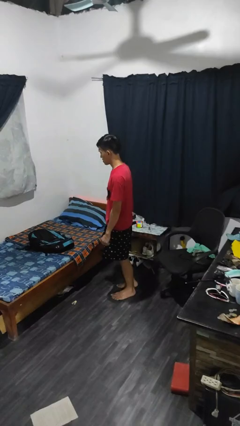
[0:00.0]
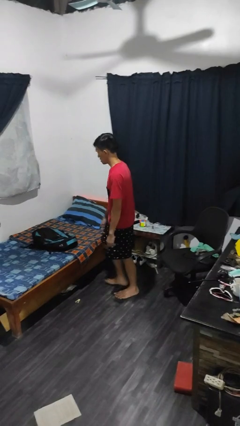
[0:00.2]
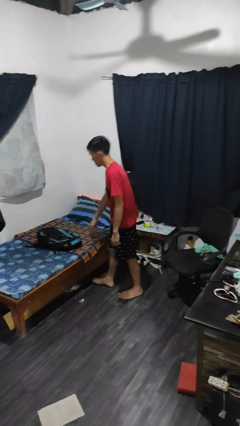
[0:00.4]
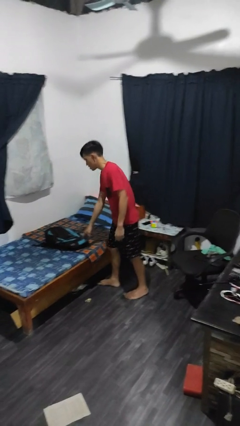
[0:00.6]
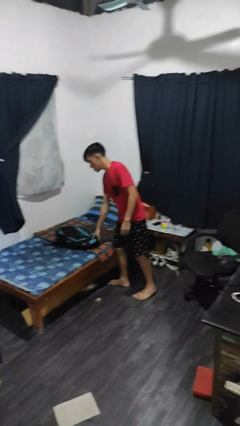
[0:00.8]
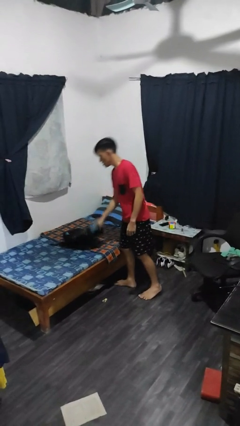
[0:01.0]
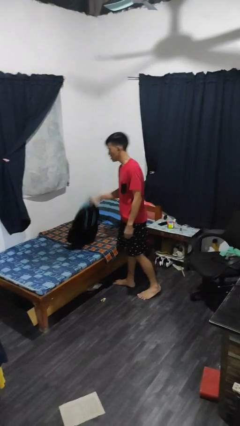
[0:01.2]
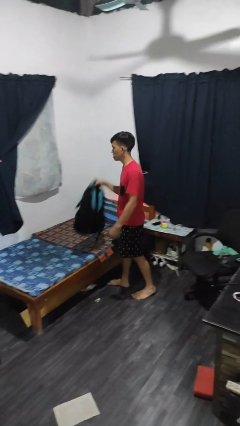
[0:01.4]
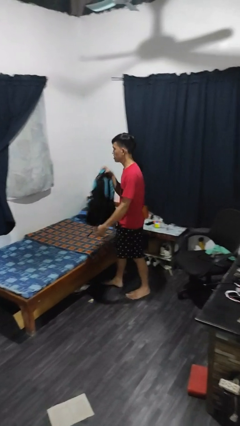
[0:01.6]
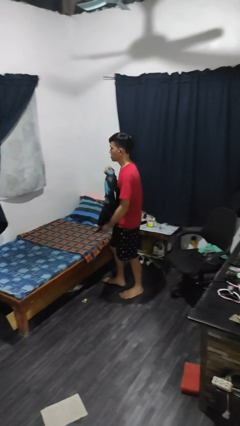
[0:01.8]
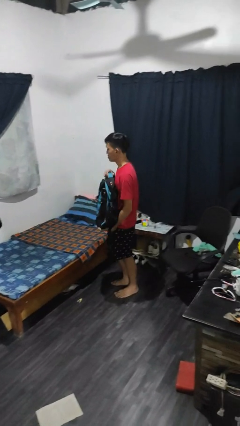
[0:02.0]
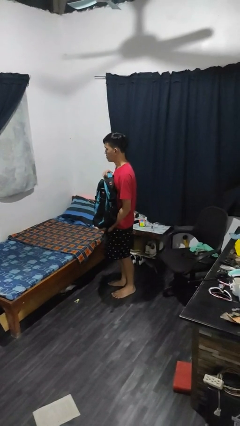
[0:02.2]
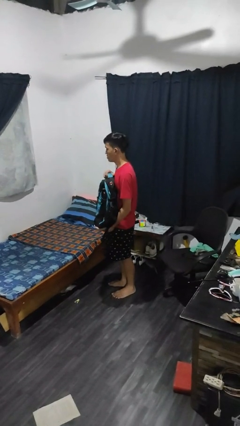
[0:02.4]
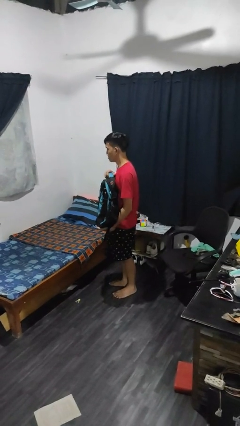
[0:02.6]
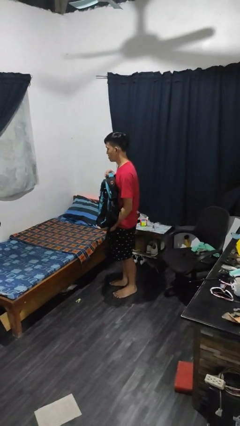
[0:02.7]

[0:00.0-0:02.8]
person picks up object from bed

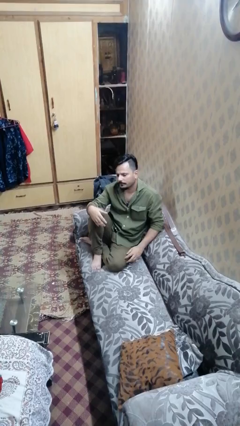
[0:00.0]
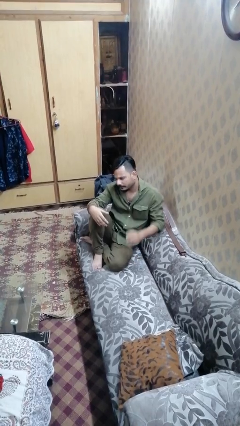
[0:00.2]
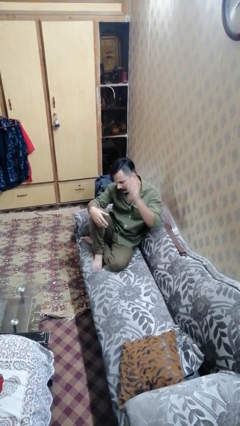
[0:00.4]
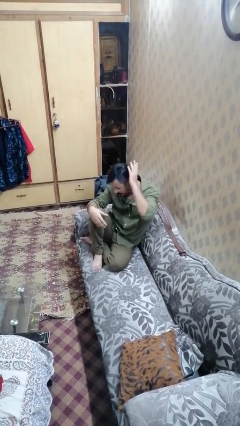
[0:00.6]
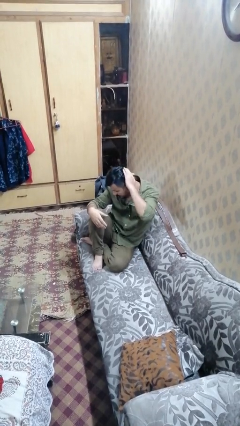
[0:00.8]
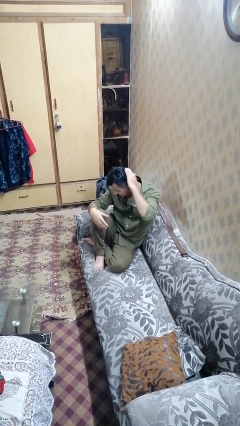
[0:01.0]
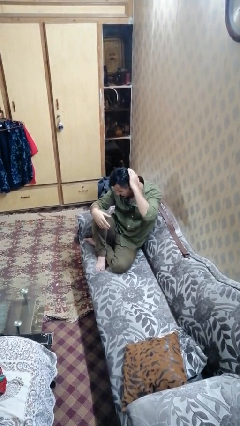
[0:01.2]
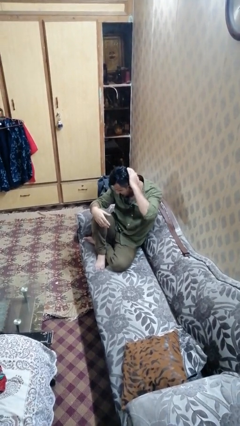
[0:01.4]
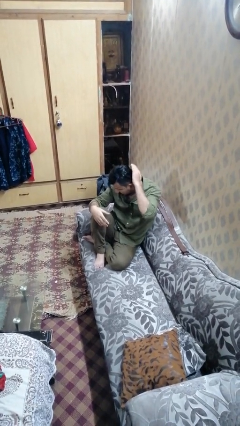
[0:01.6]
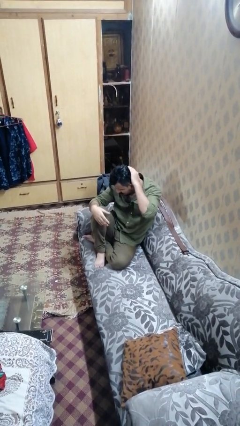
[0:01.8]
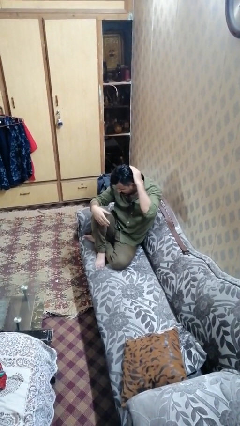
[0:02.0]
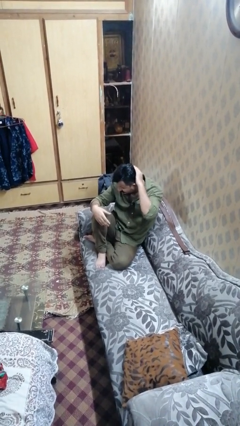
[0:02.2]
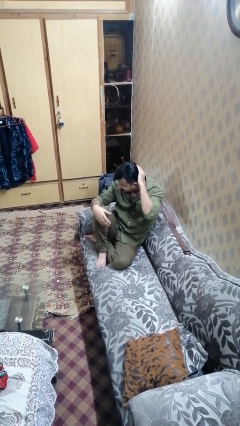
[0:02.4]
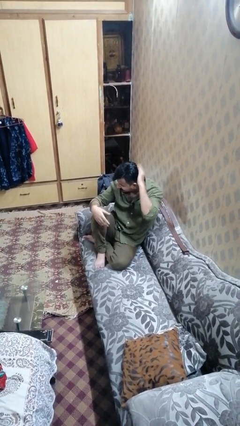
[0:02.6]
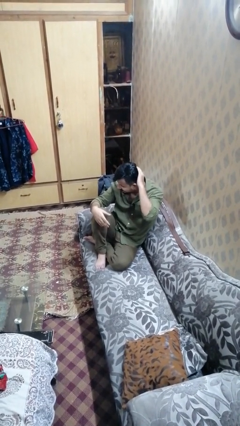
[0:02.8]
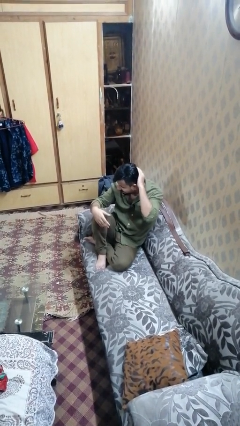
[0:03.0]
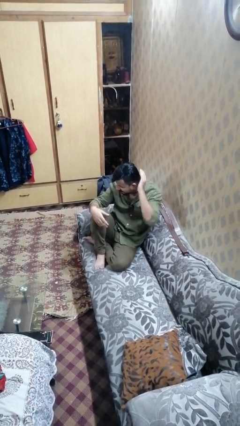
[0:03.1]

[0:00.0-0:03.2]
person pats head

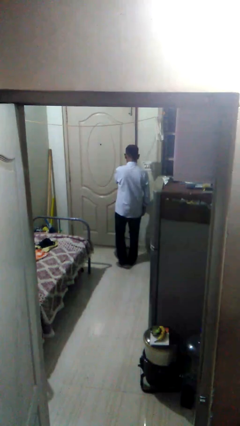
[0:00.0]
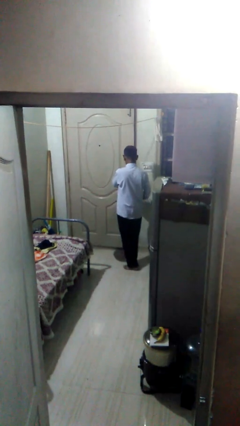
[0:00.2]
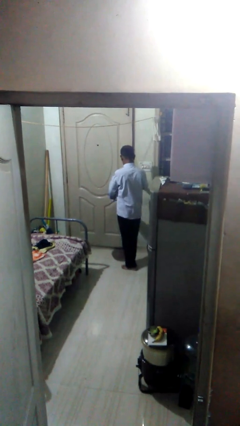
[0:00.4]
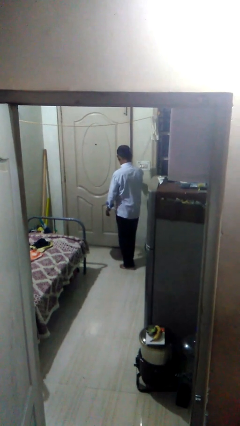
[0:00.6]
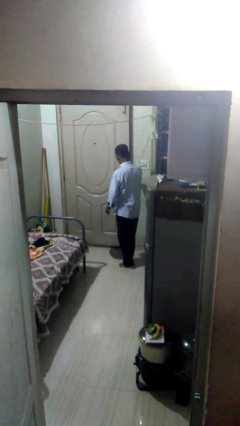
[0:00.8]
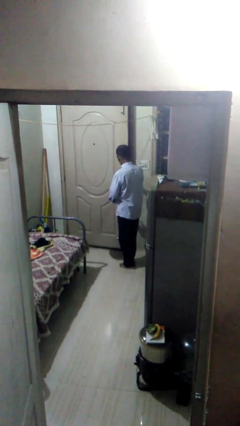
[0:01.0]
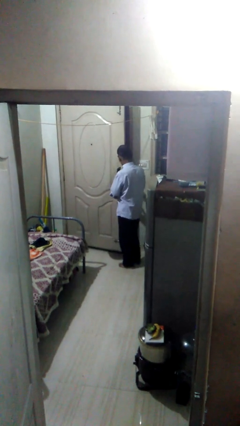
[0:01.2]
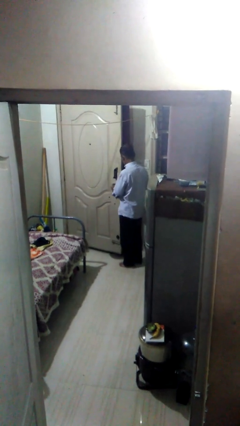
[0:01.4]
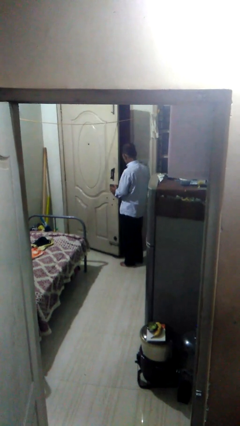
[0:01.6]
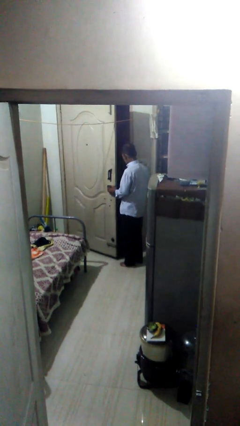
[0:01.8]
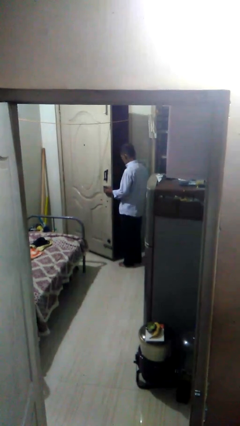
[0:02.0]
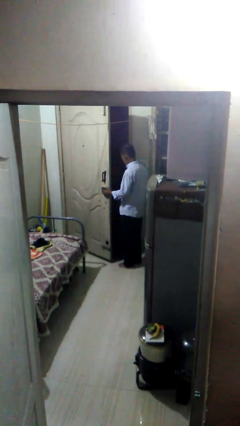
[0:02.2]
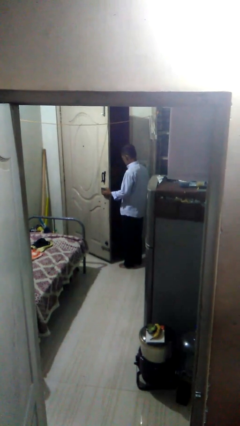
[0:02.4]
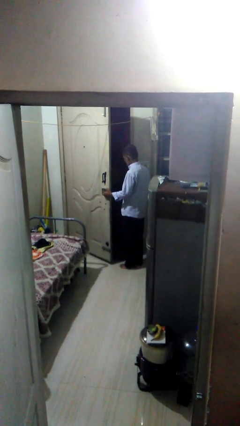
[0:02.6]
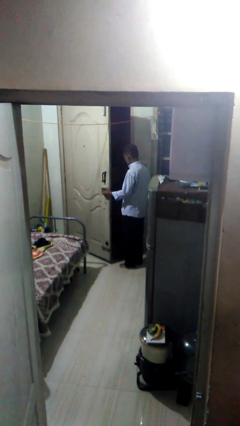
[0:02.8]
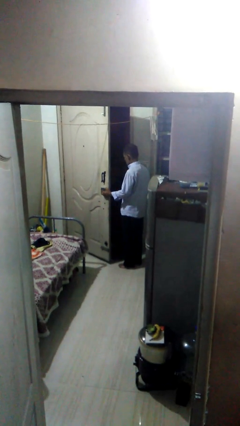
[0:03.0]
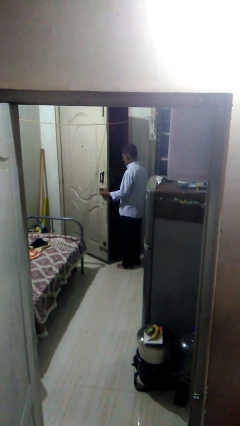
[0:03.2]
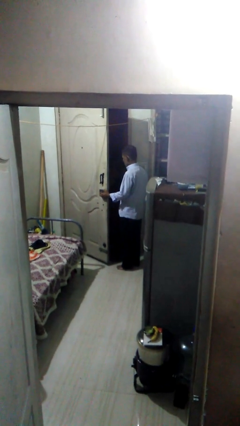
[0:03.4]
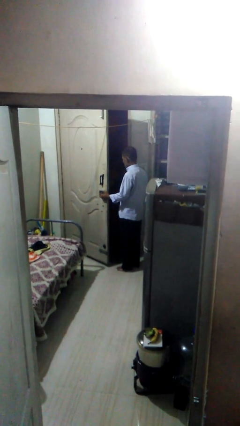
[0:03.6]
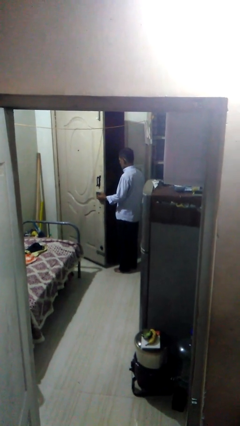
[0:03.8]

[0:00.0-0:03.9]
person opens facility door

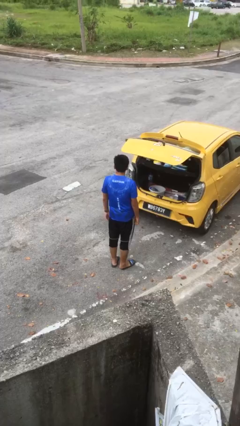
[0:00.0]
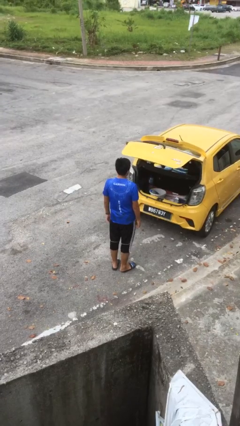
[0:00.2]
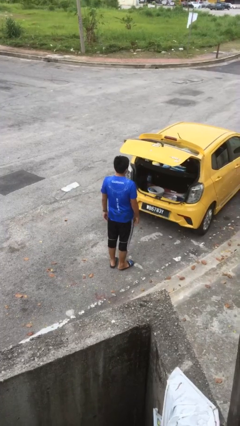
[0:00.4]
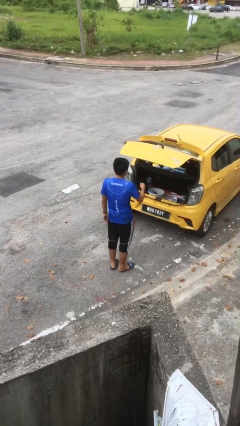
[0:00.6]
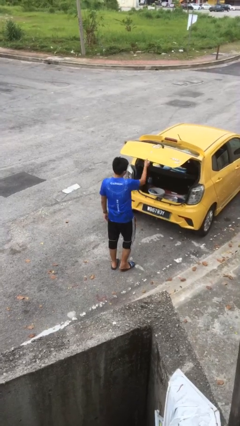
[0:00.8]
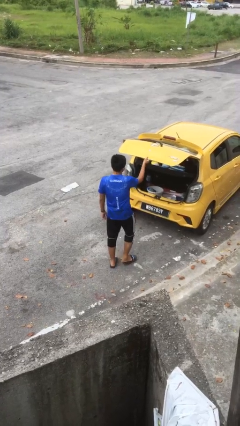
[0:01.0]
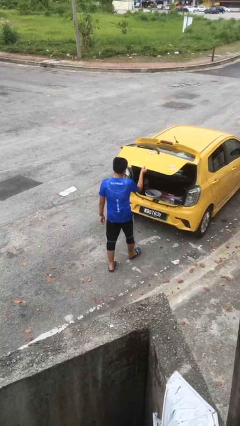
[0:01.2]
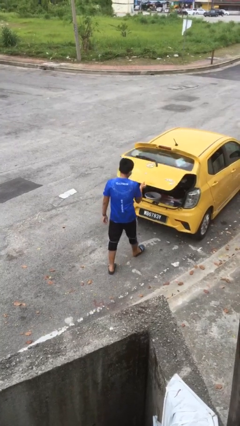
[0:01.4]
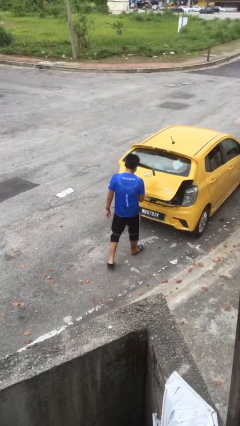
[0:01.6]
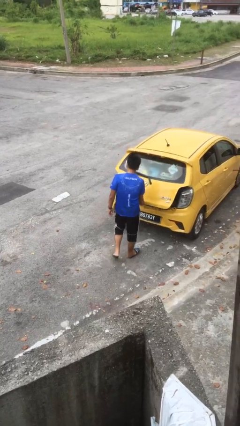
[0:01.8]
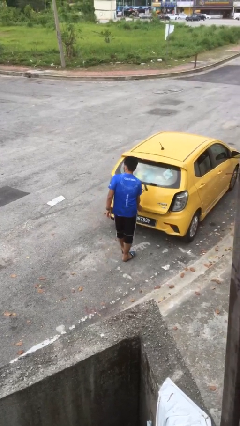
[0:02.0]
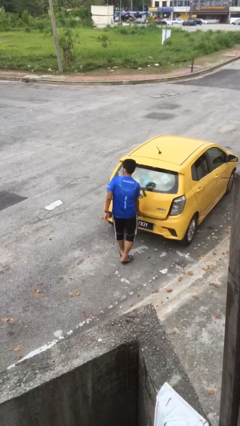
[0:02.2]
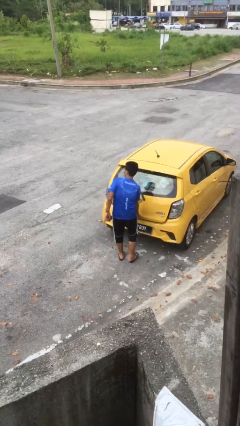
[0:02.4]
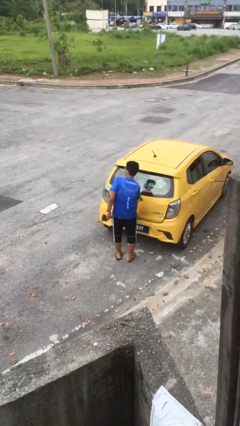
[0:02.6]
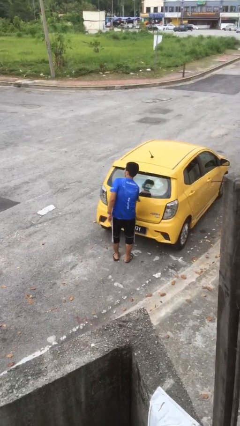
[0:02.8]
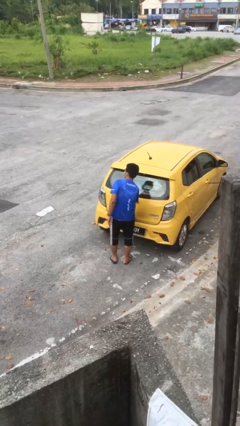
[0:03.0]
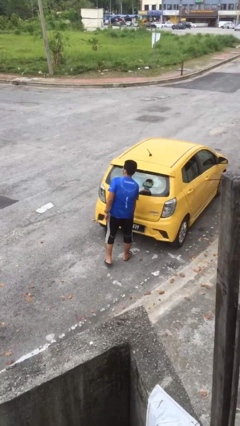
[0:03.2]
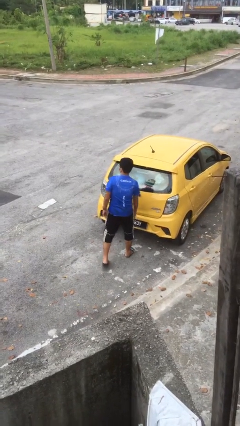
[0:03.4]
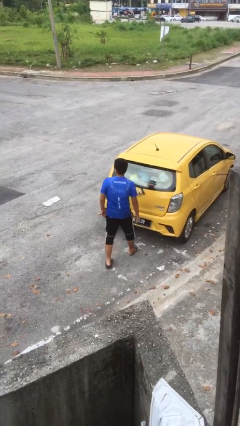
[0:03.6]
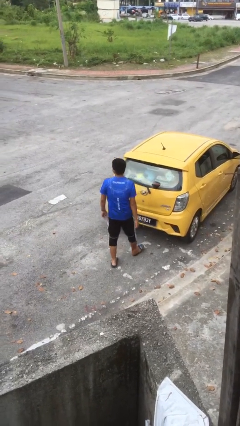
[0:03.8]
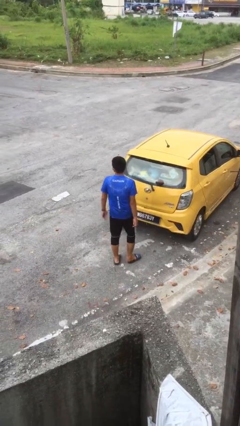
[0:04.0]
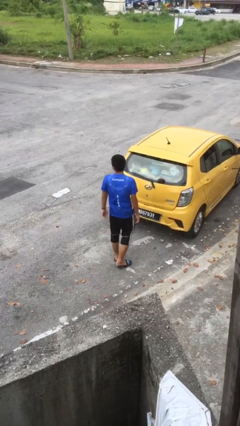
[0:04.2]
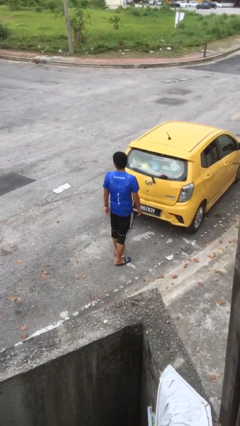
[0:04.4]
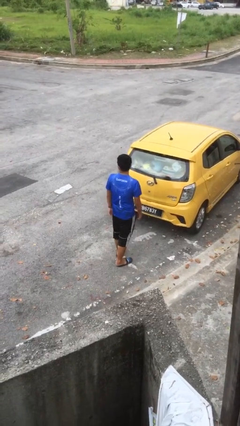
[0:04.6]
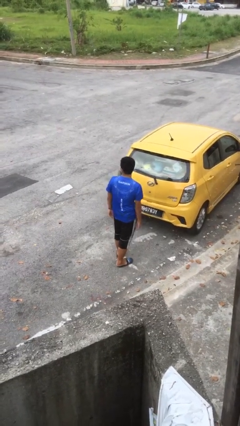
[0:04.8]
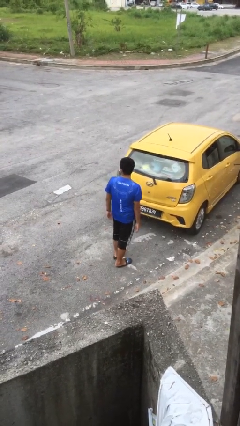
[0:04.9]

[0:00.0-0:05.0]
person closes car trunk

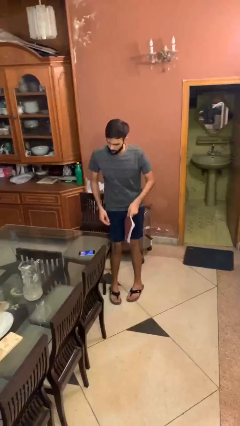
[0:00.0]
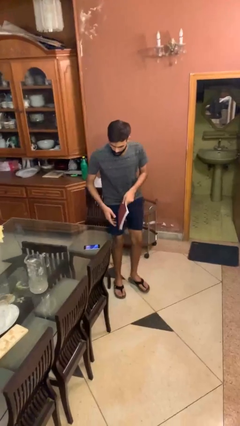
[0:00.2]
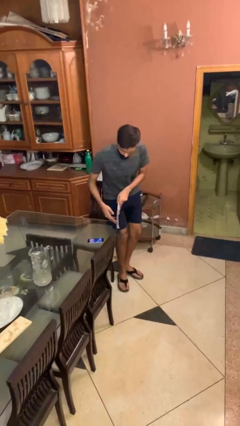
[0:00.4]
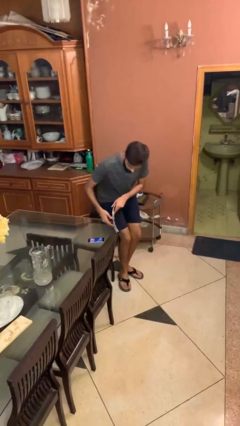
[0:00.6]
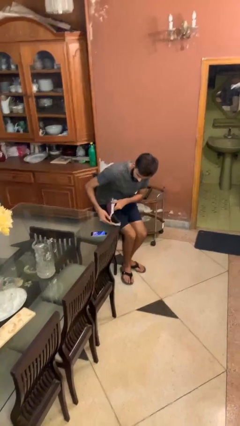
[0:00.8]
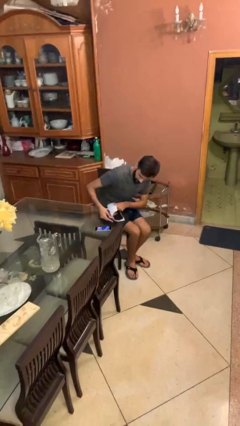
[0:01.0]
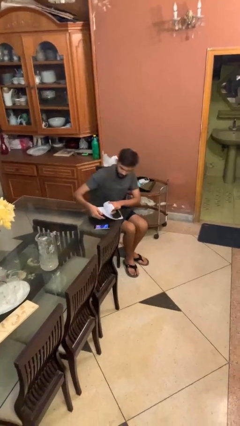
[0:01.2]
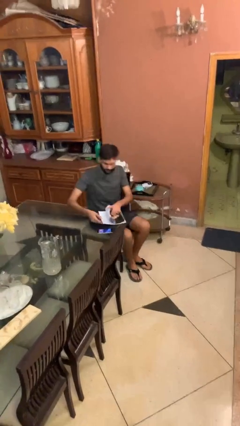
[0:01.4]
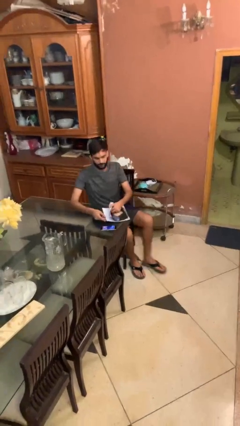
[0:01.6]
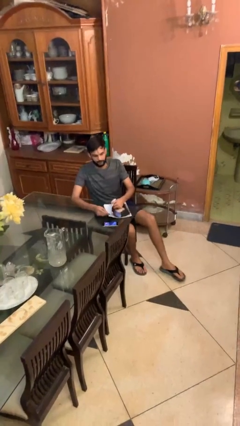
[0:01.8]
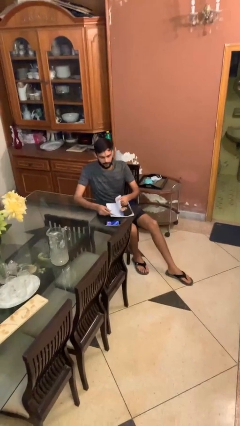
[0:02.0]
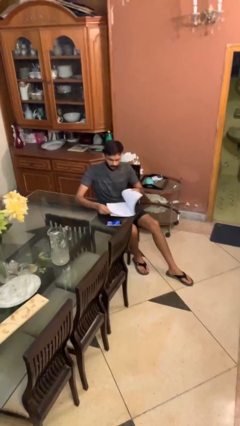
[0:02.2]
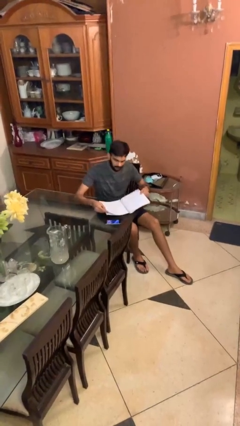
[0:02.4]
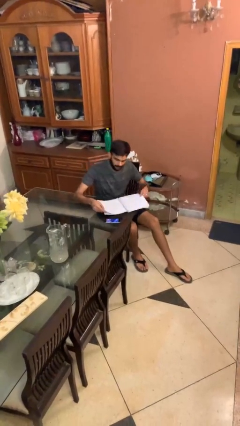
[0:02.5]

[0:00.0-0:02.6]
person sits down

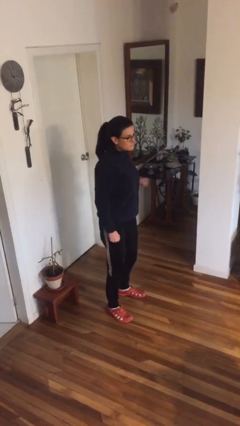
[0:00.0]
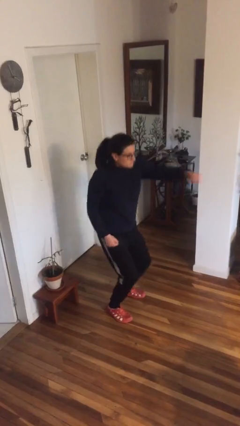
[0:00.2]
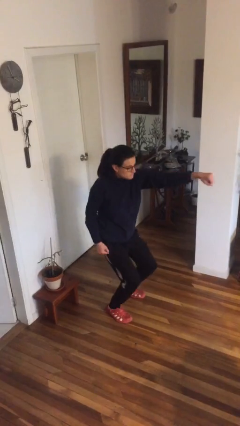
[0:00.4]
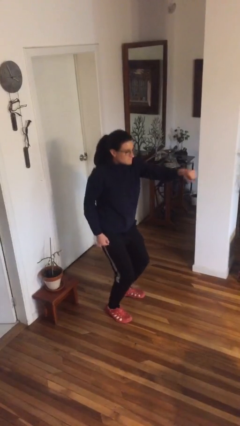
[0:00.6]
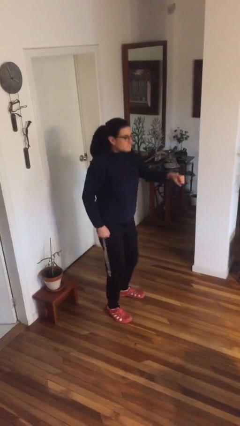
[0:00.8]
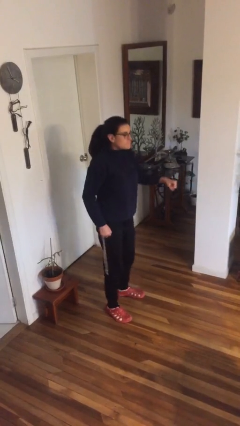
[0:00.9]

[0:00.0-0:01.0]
person punches
